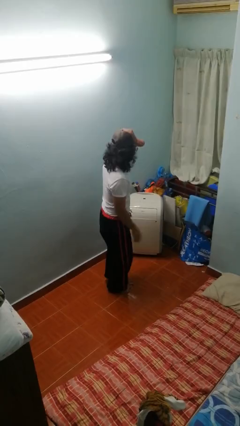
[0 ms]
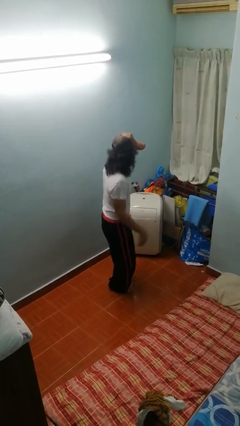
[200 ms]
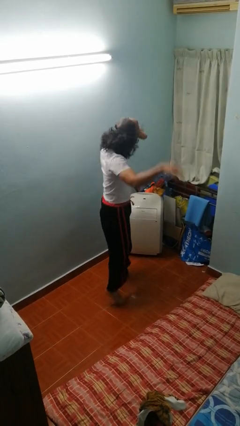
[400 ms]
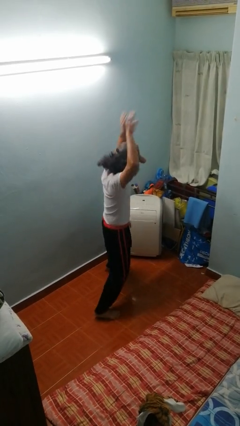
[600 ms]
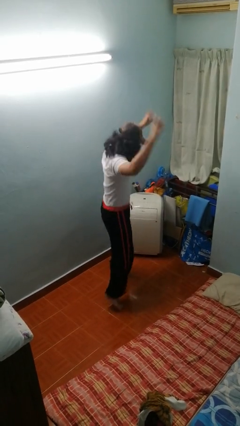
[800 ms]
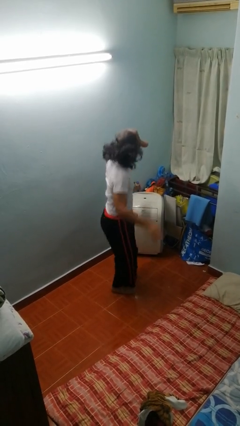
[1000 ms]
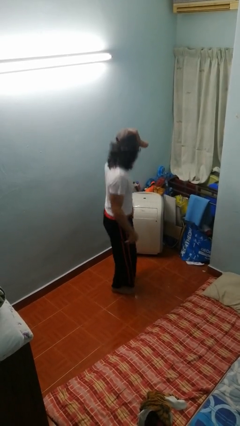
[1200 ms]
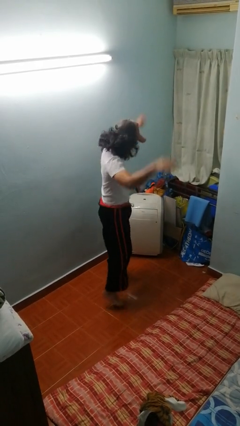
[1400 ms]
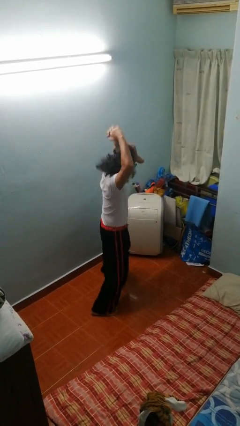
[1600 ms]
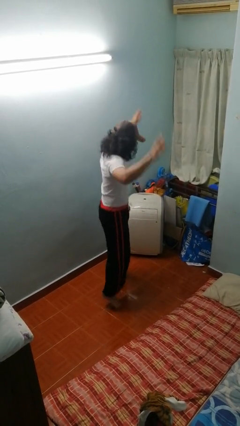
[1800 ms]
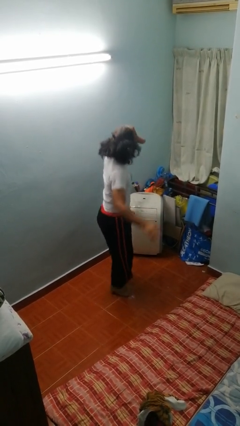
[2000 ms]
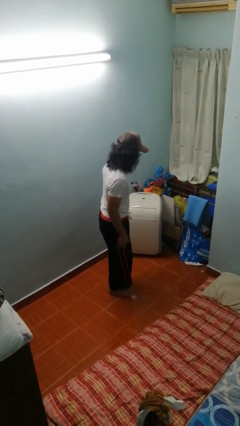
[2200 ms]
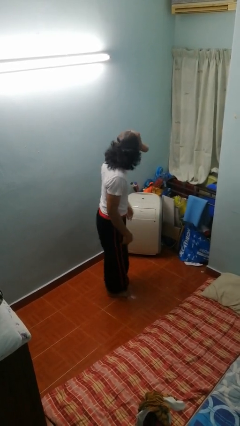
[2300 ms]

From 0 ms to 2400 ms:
person exercises with jumping jacks

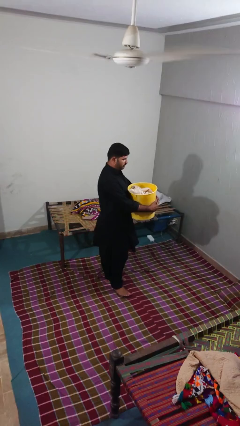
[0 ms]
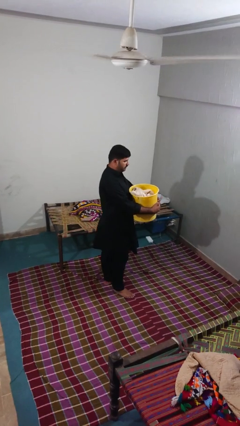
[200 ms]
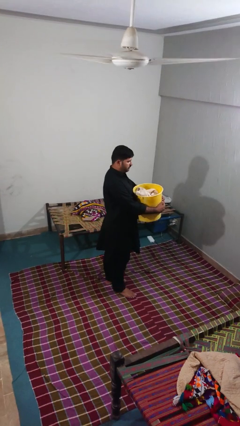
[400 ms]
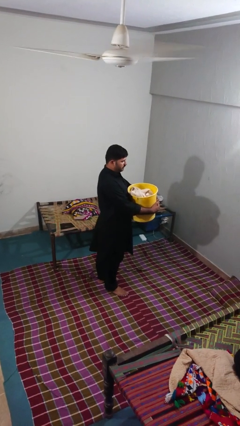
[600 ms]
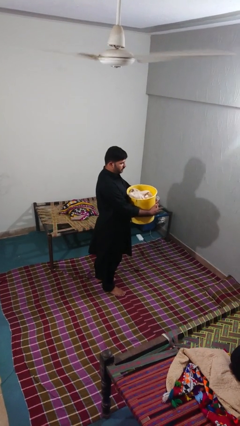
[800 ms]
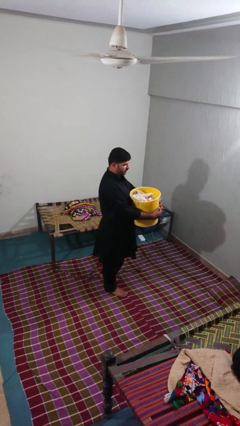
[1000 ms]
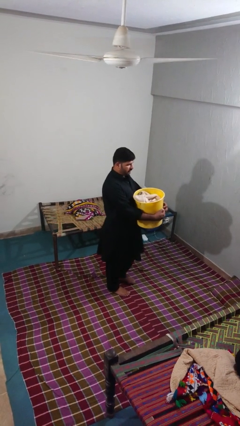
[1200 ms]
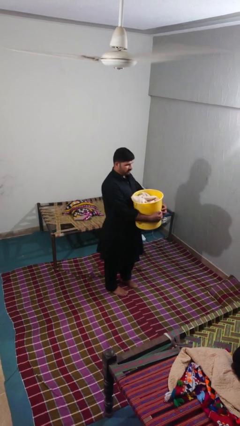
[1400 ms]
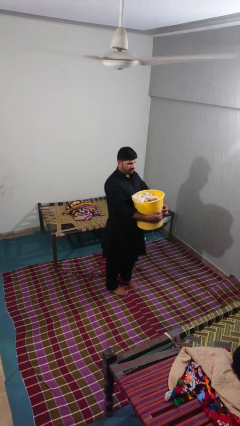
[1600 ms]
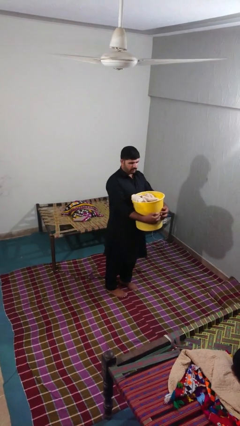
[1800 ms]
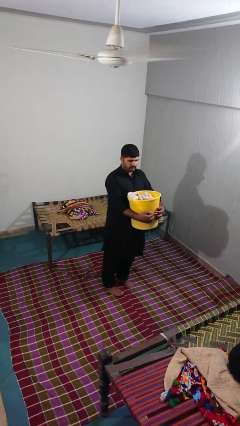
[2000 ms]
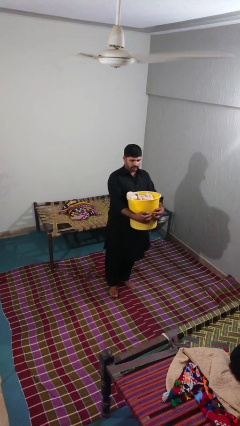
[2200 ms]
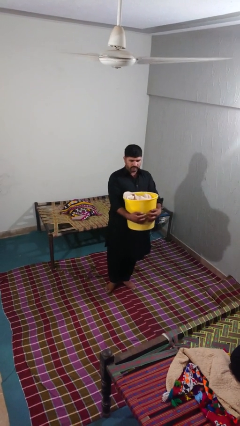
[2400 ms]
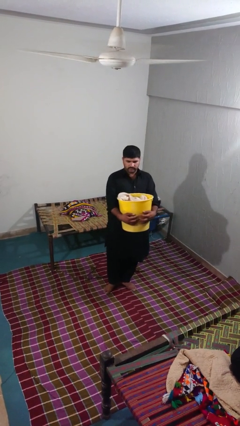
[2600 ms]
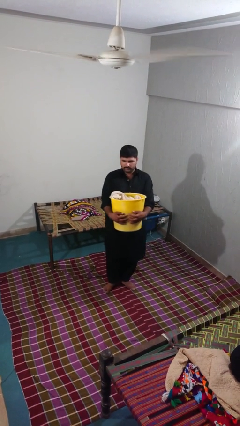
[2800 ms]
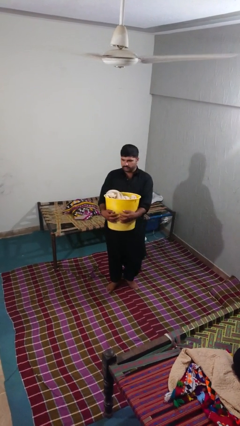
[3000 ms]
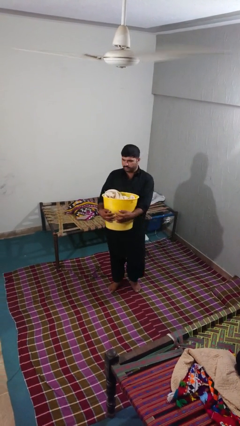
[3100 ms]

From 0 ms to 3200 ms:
person carries laundry basket

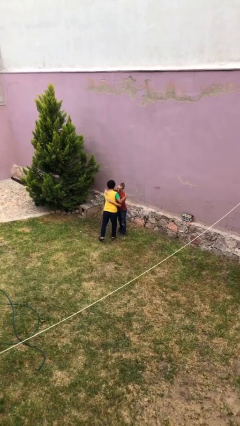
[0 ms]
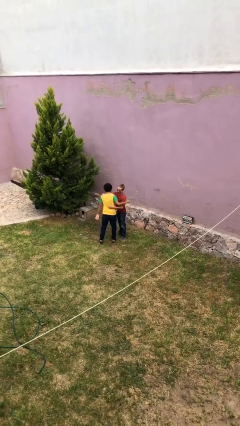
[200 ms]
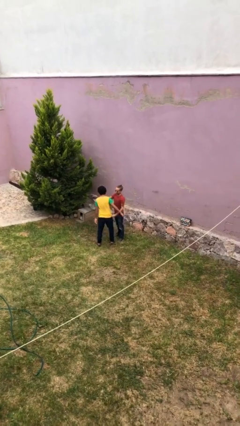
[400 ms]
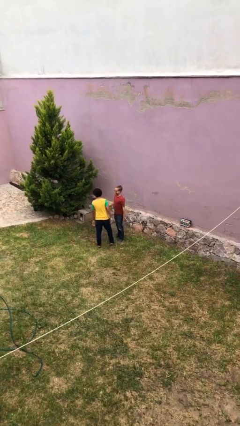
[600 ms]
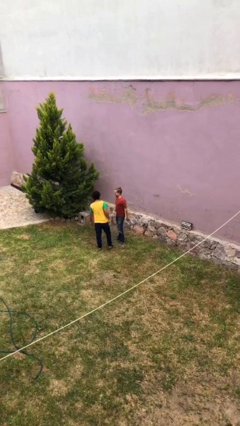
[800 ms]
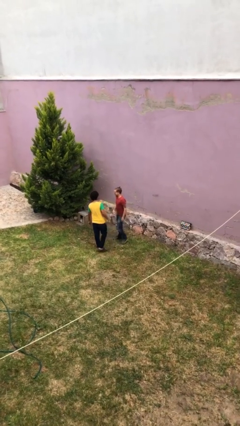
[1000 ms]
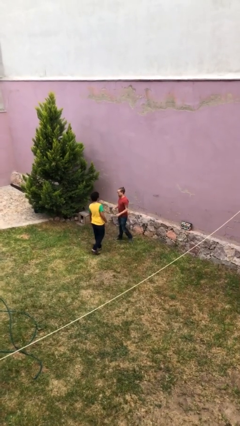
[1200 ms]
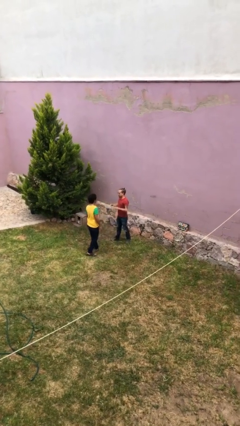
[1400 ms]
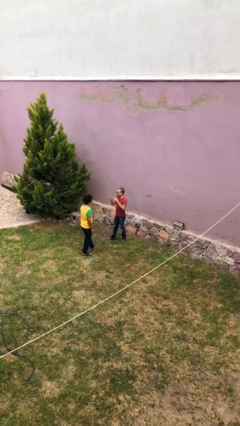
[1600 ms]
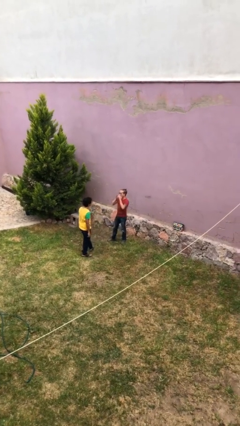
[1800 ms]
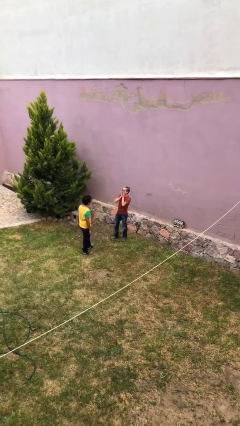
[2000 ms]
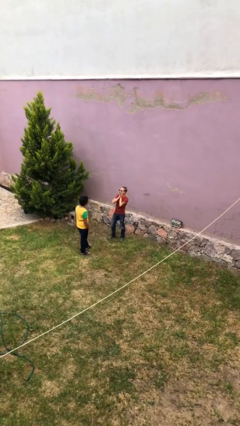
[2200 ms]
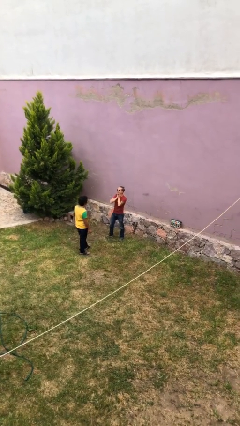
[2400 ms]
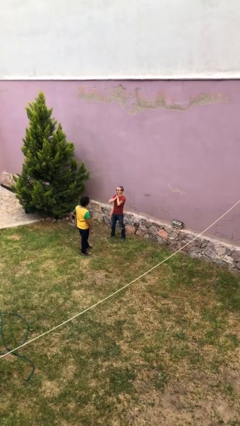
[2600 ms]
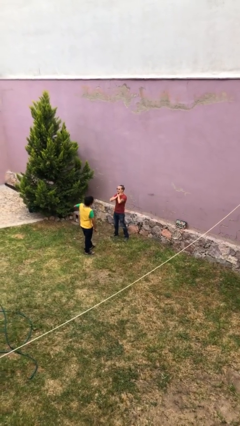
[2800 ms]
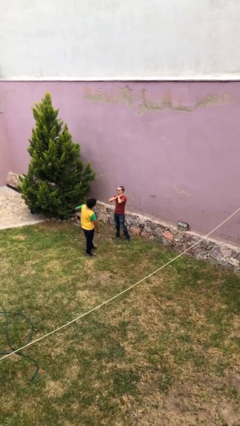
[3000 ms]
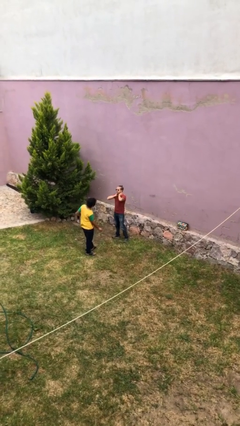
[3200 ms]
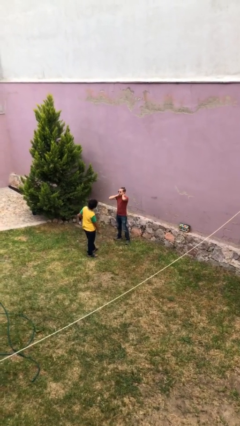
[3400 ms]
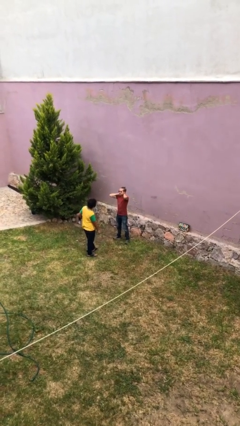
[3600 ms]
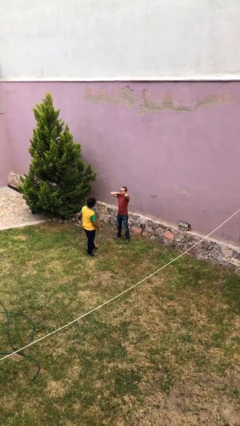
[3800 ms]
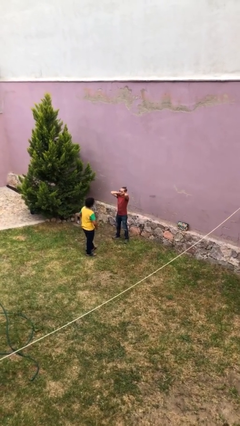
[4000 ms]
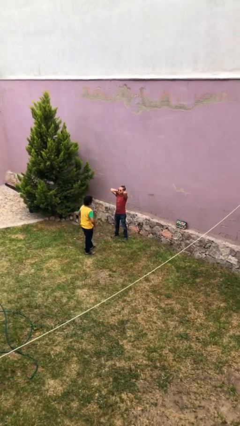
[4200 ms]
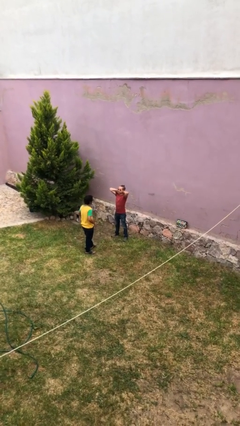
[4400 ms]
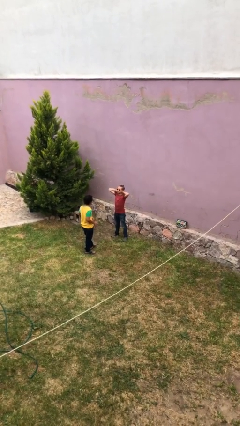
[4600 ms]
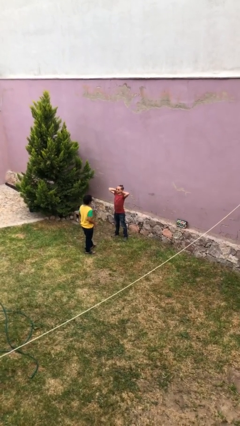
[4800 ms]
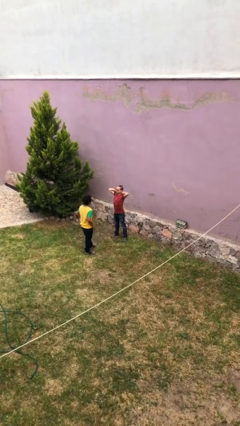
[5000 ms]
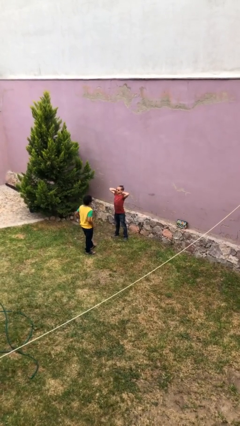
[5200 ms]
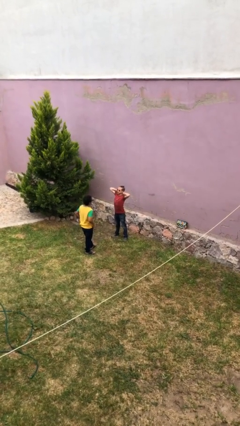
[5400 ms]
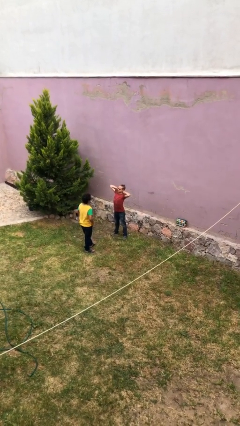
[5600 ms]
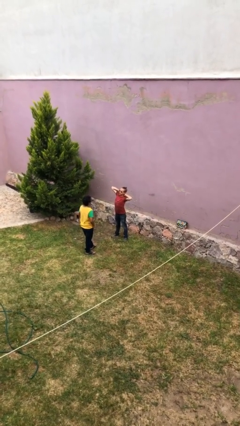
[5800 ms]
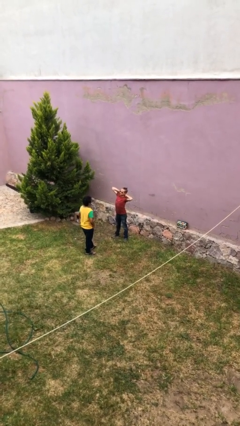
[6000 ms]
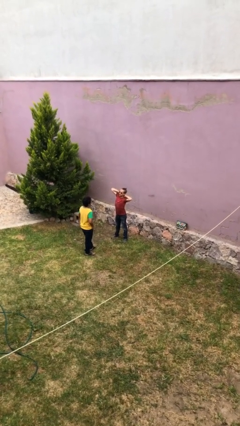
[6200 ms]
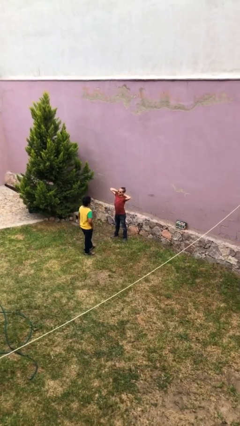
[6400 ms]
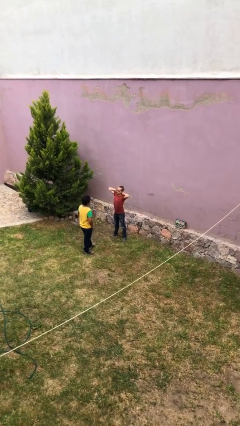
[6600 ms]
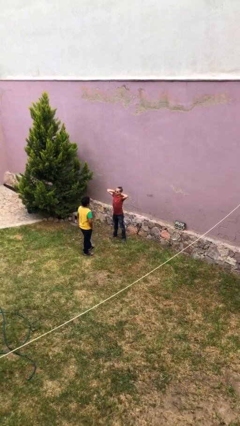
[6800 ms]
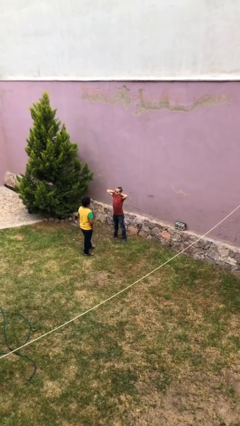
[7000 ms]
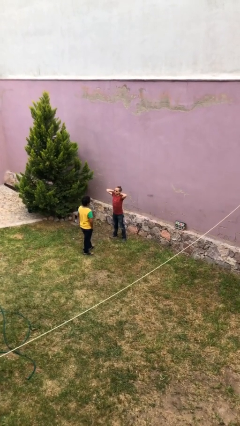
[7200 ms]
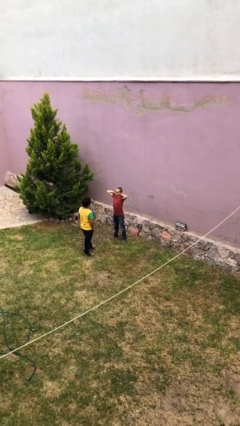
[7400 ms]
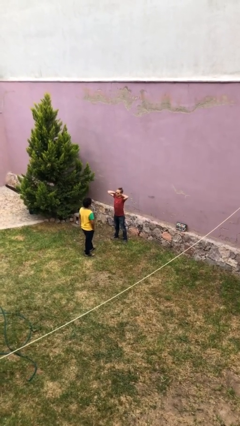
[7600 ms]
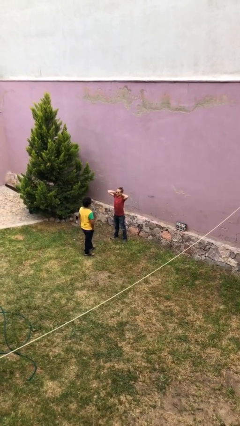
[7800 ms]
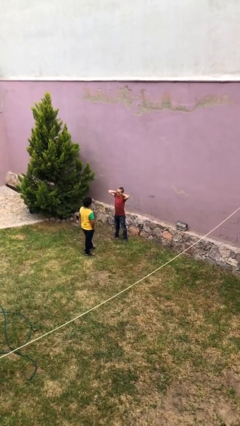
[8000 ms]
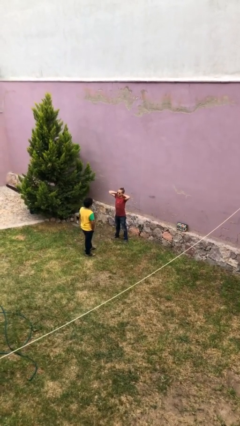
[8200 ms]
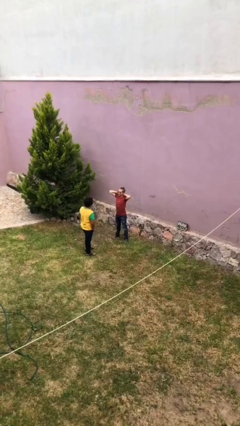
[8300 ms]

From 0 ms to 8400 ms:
person talks to person

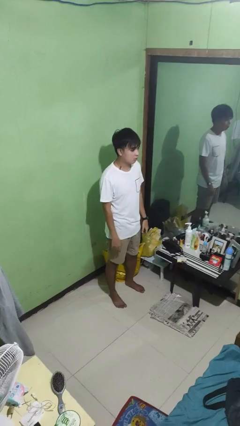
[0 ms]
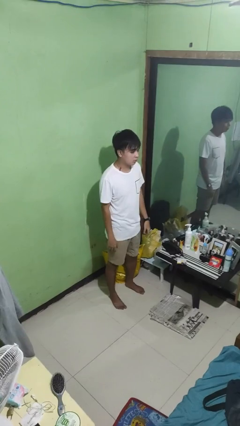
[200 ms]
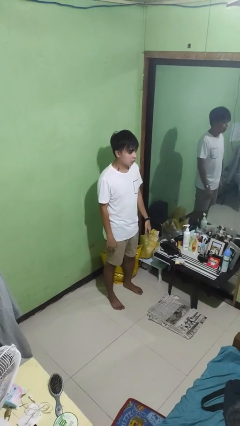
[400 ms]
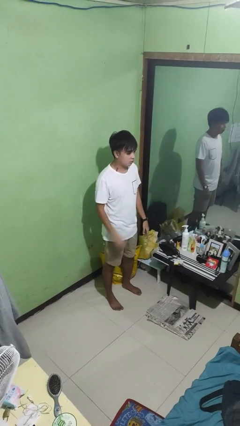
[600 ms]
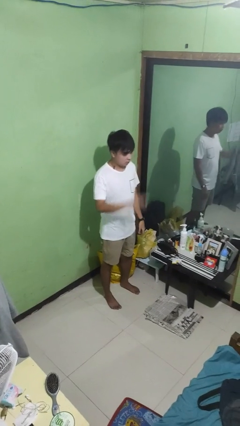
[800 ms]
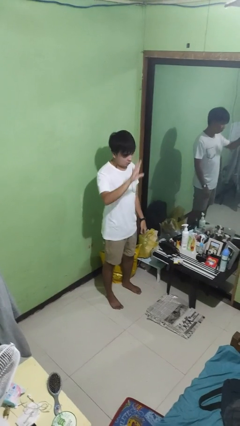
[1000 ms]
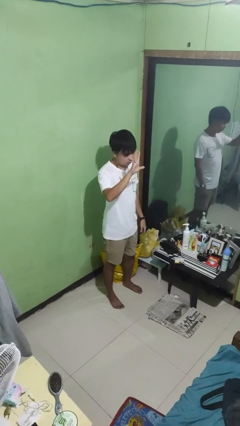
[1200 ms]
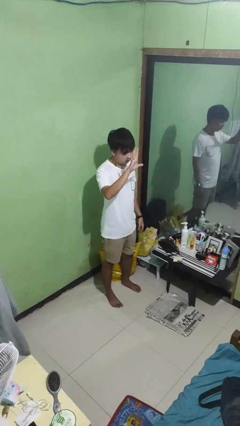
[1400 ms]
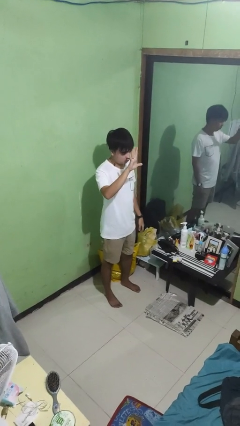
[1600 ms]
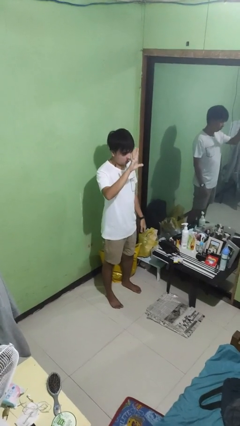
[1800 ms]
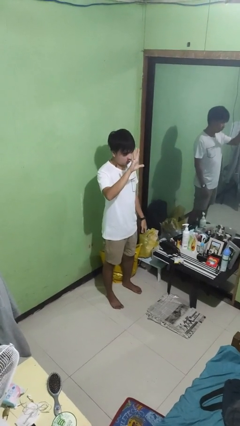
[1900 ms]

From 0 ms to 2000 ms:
person gestures number five

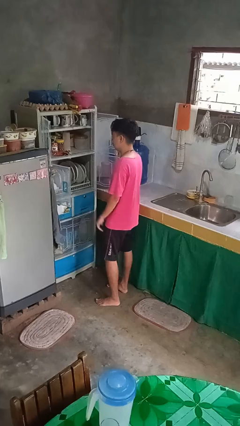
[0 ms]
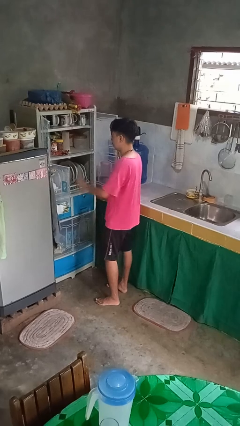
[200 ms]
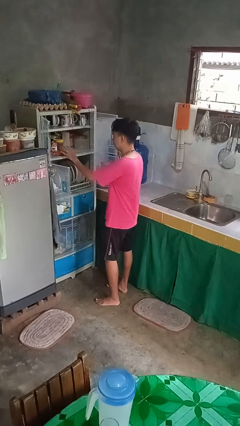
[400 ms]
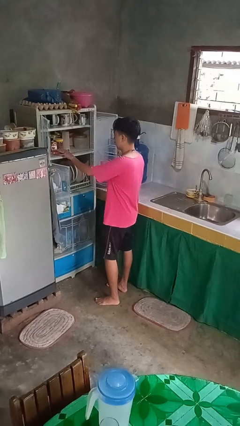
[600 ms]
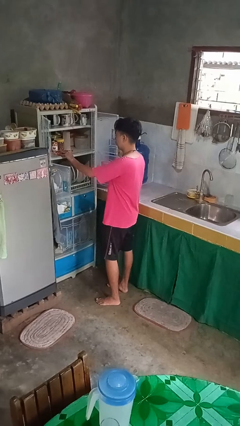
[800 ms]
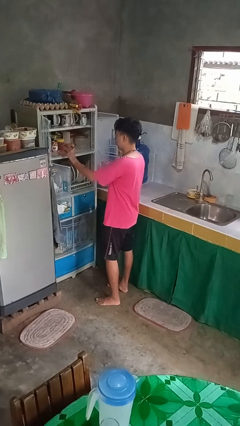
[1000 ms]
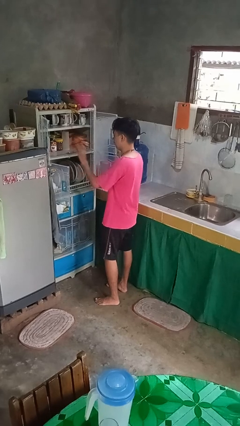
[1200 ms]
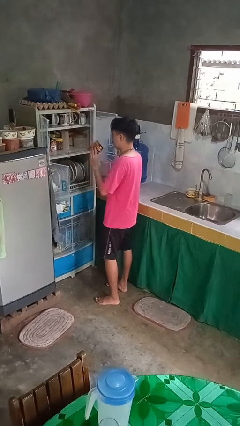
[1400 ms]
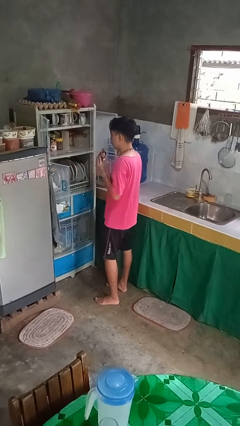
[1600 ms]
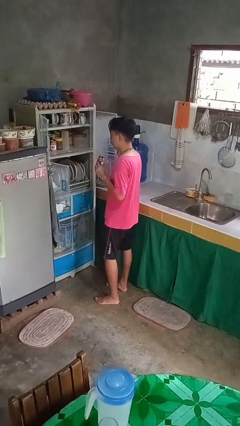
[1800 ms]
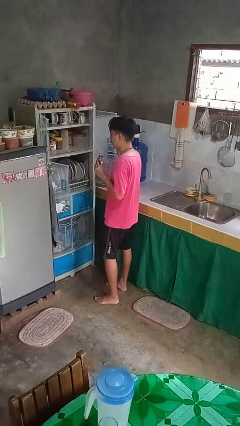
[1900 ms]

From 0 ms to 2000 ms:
person takes object from cabinet
